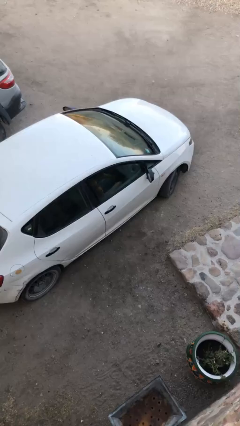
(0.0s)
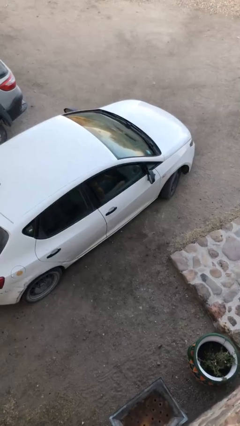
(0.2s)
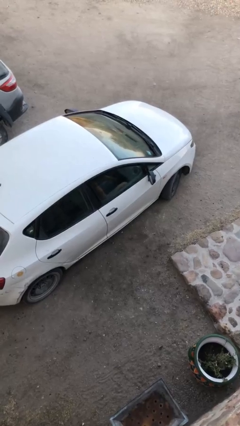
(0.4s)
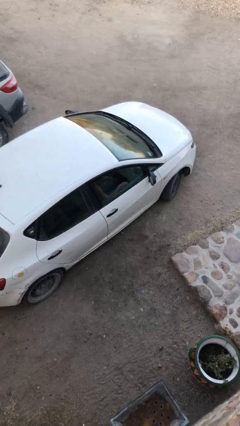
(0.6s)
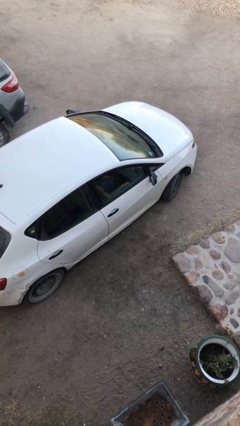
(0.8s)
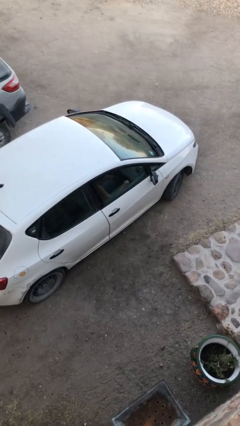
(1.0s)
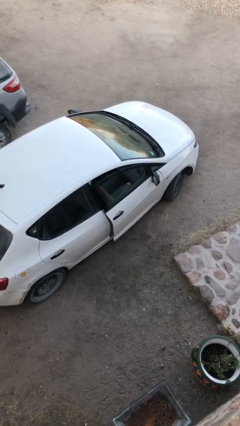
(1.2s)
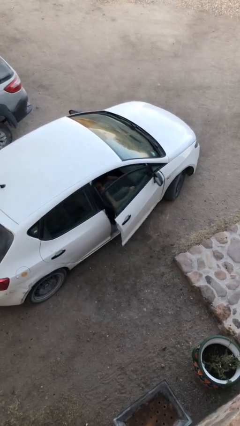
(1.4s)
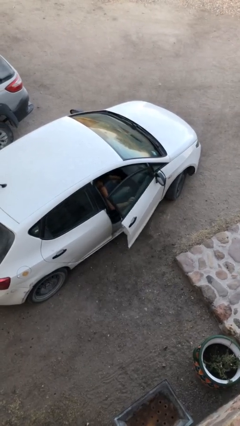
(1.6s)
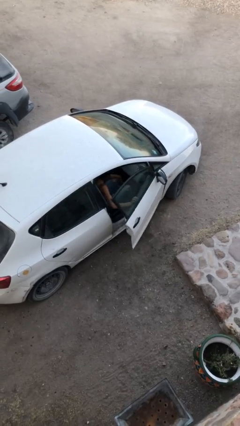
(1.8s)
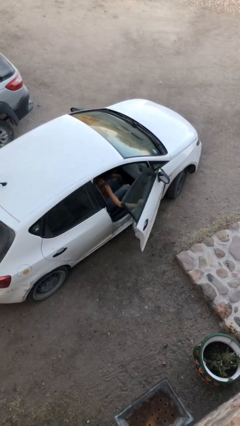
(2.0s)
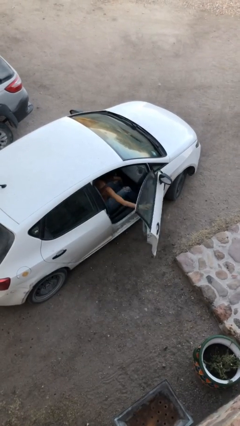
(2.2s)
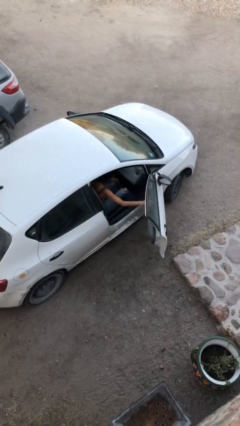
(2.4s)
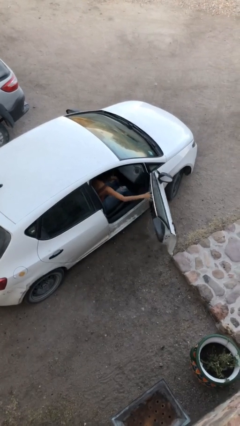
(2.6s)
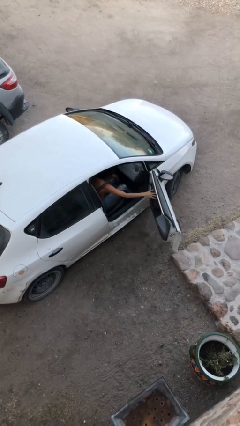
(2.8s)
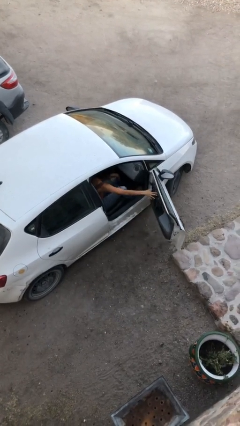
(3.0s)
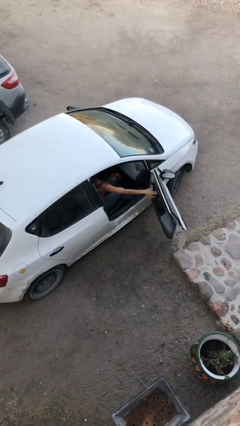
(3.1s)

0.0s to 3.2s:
person opens car door

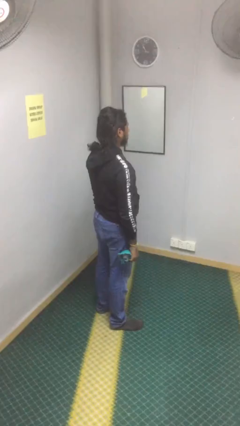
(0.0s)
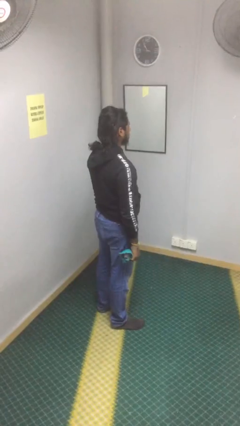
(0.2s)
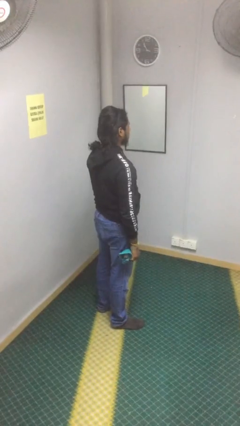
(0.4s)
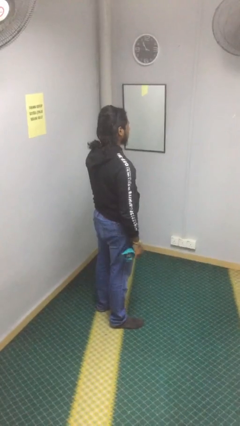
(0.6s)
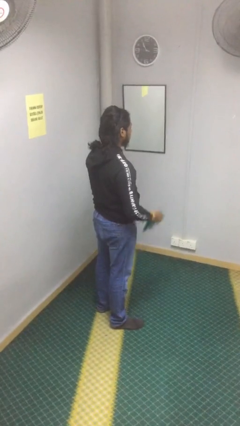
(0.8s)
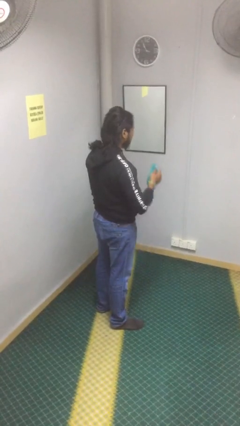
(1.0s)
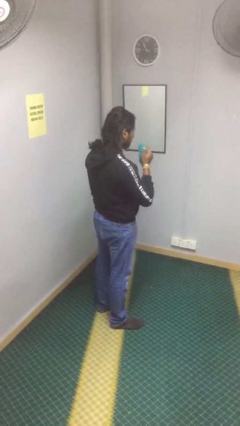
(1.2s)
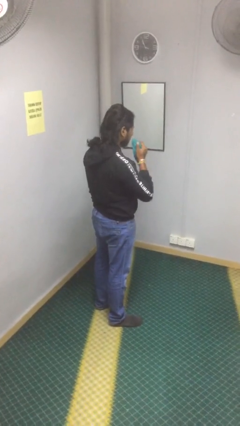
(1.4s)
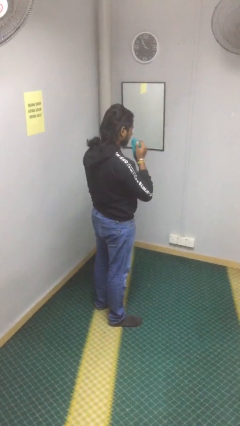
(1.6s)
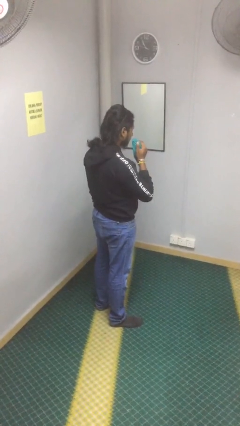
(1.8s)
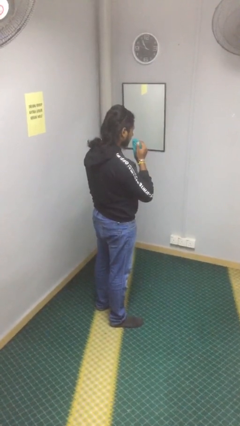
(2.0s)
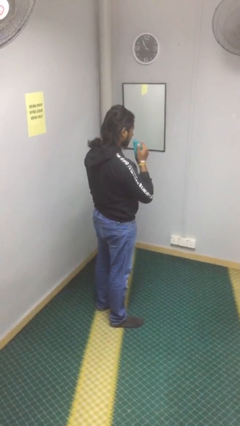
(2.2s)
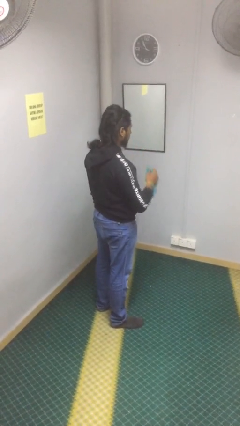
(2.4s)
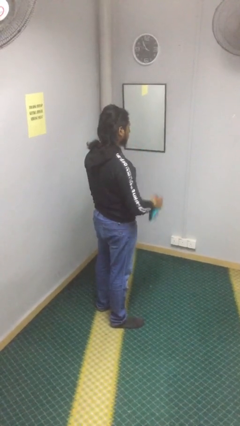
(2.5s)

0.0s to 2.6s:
person wipes mouth with napkin

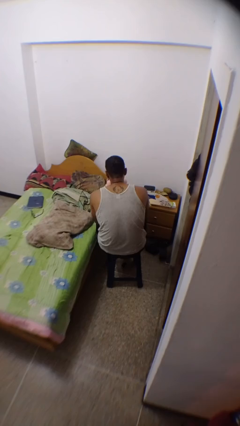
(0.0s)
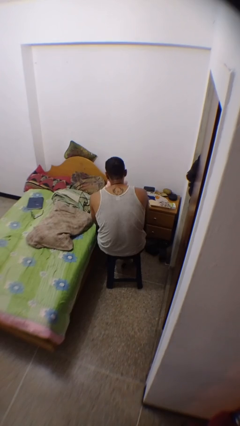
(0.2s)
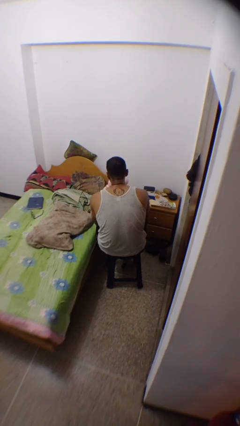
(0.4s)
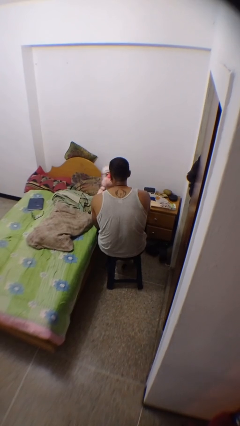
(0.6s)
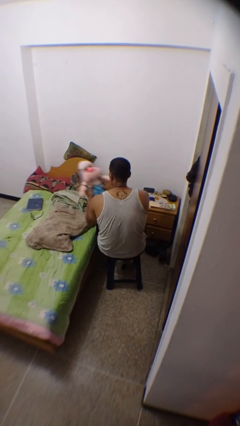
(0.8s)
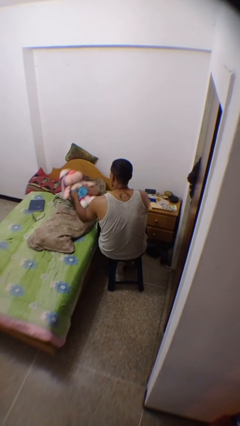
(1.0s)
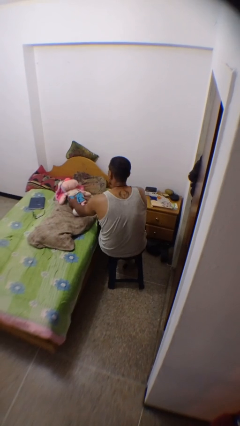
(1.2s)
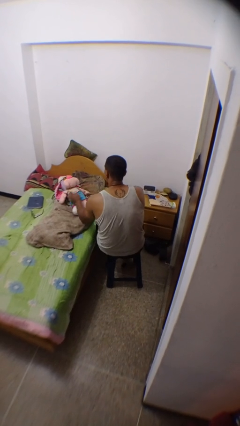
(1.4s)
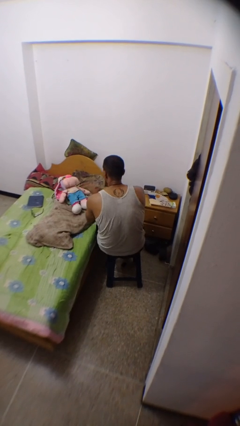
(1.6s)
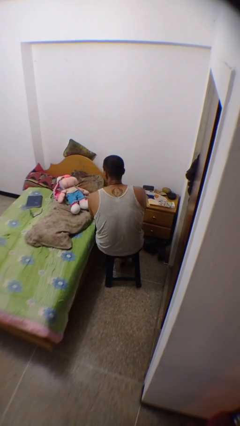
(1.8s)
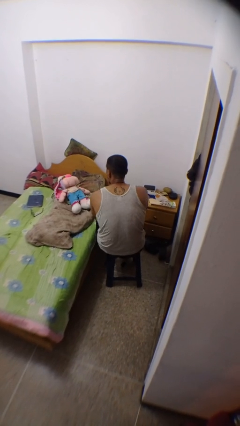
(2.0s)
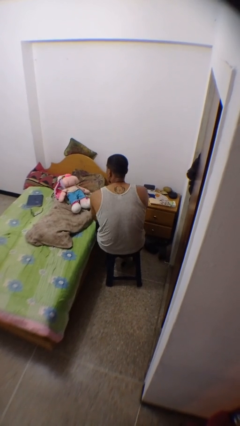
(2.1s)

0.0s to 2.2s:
person puts down object on bed

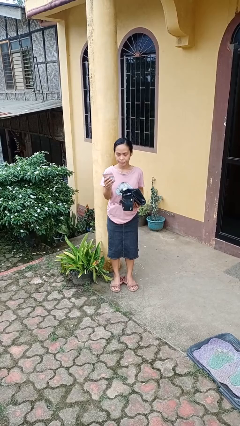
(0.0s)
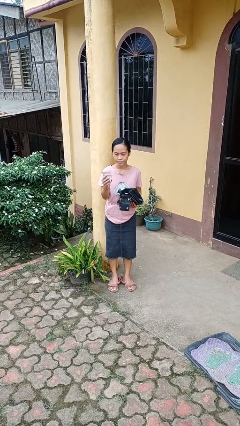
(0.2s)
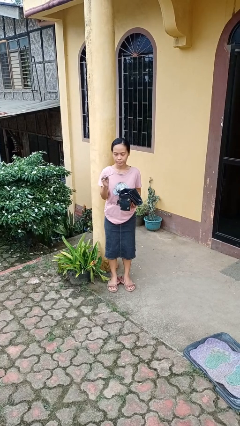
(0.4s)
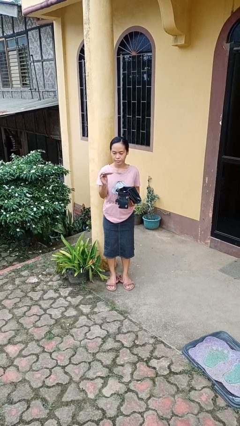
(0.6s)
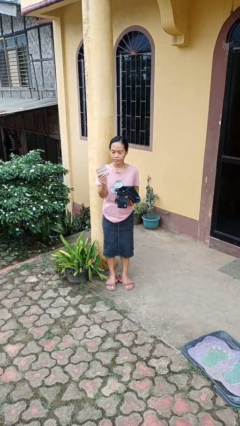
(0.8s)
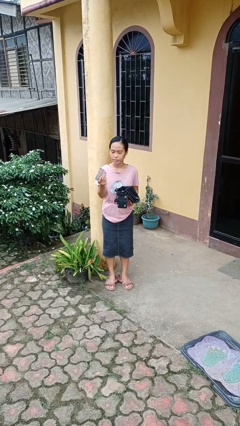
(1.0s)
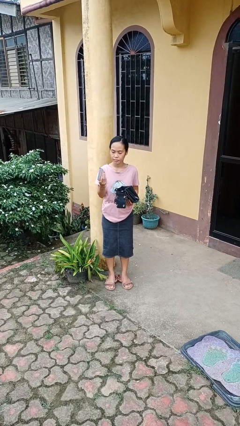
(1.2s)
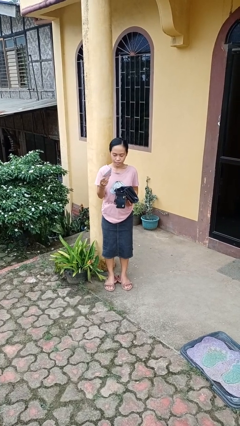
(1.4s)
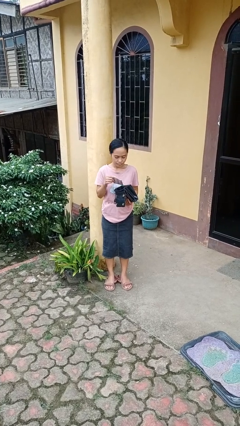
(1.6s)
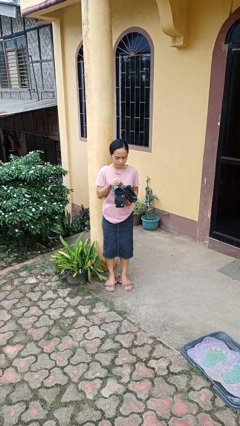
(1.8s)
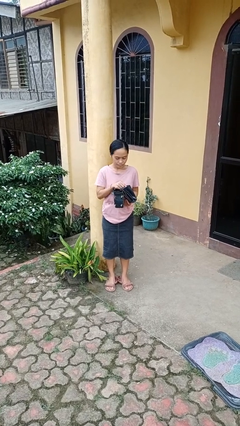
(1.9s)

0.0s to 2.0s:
person takes object from purse

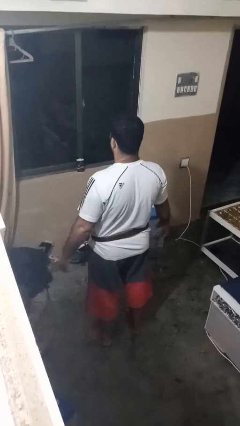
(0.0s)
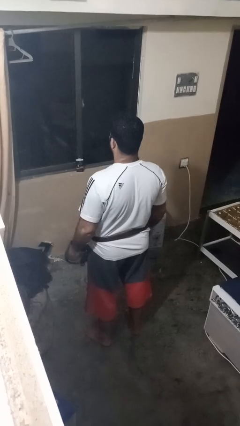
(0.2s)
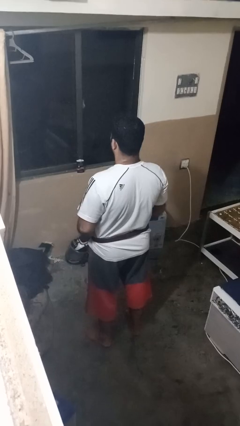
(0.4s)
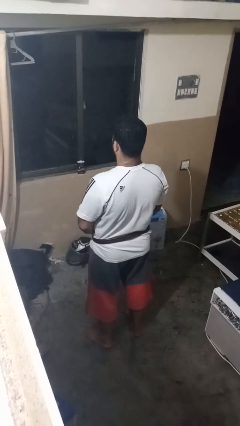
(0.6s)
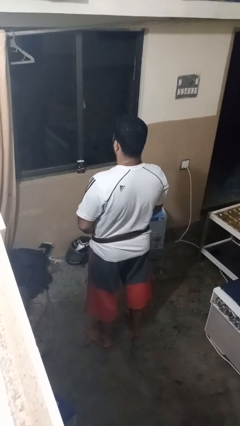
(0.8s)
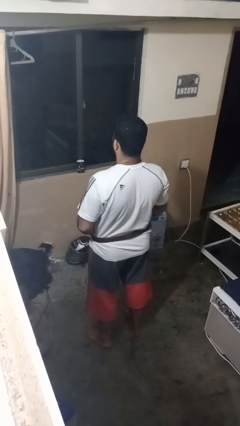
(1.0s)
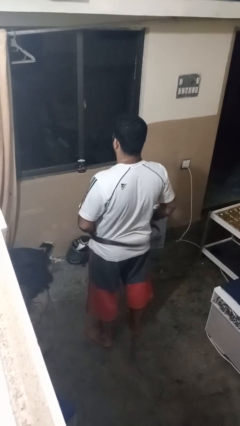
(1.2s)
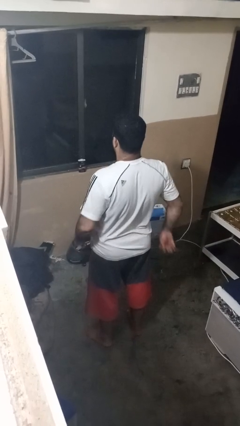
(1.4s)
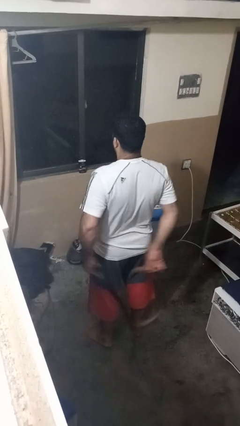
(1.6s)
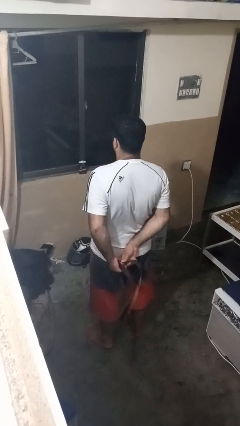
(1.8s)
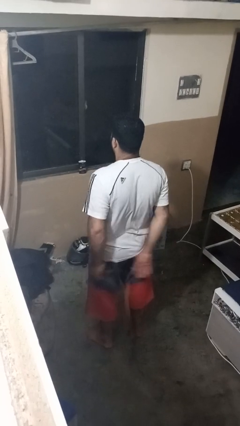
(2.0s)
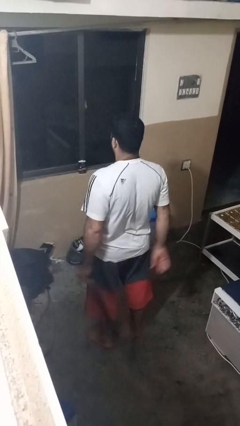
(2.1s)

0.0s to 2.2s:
person takes off belt

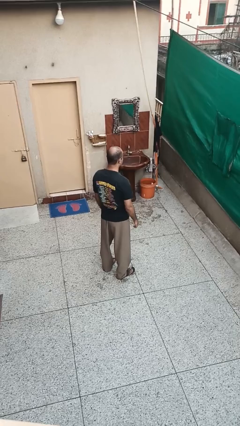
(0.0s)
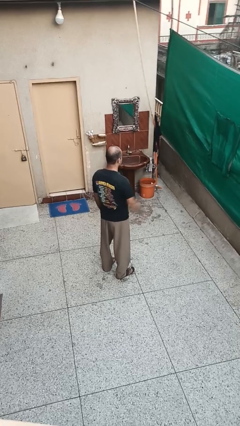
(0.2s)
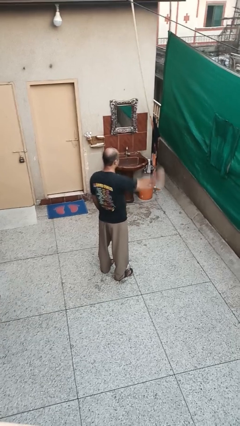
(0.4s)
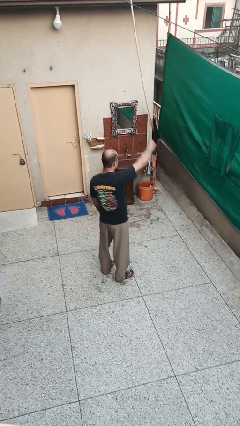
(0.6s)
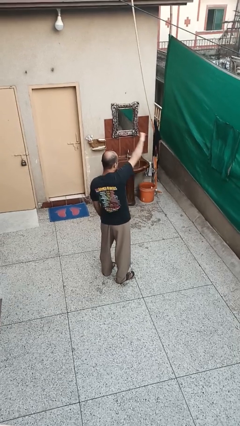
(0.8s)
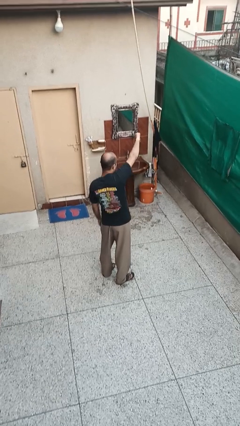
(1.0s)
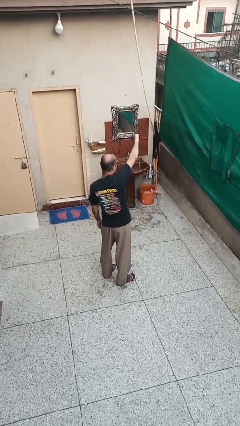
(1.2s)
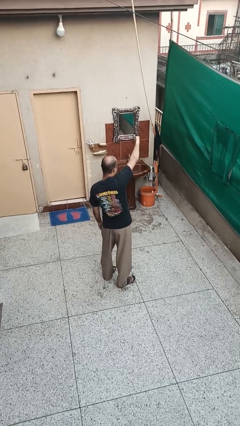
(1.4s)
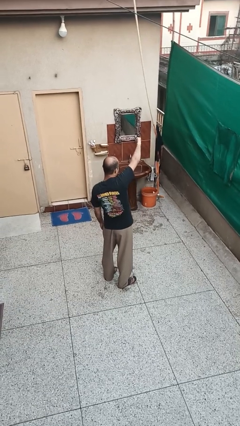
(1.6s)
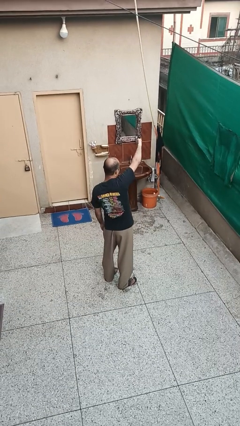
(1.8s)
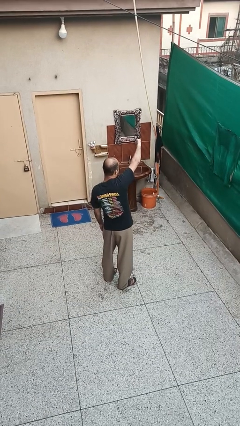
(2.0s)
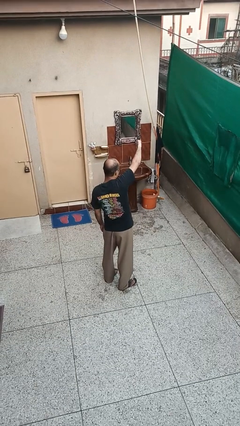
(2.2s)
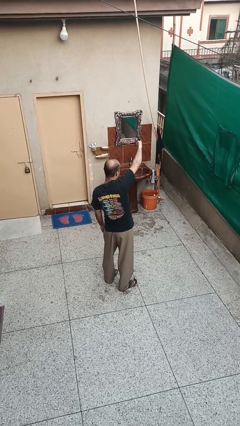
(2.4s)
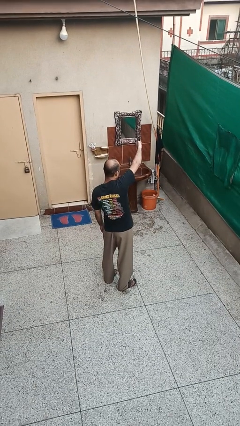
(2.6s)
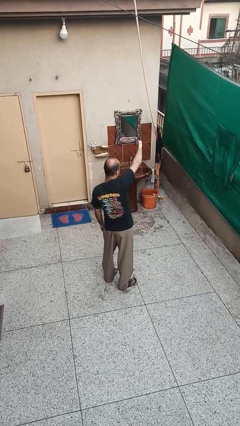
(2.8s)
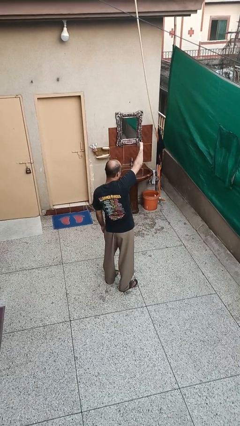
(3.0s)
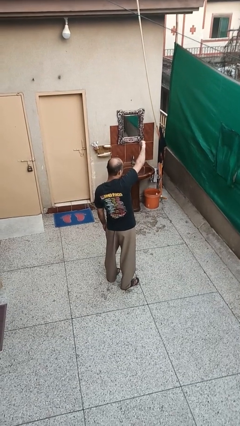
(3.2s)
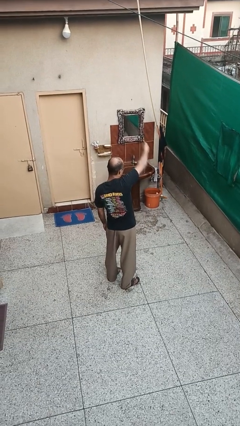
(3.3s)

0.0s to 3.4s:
person gestures thumbs down

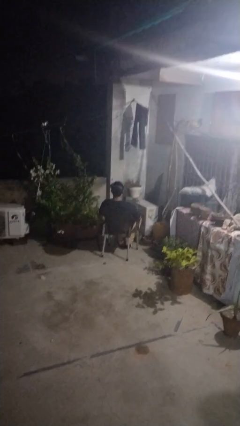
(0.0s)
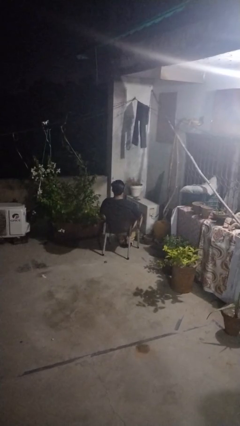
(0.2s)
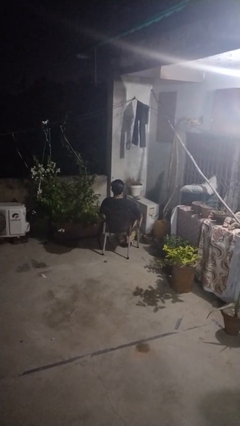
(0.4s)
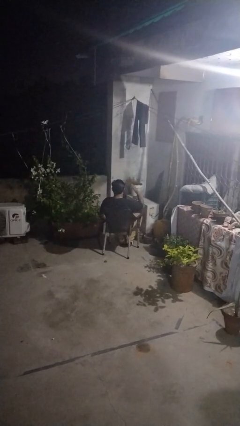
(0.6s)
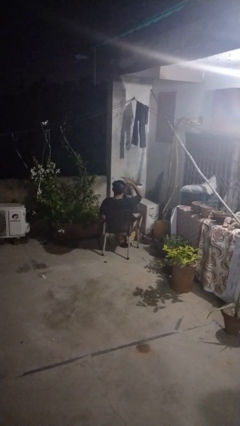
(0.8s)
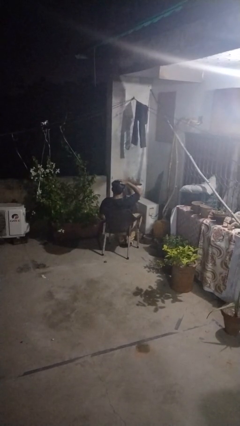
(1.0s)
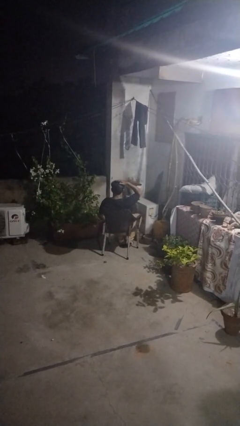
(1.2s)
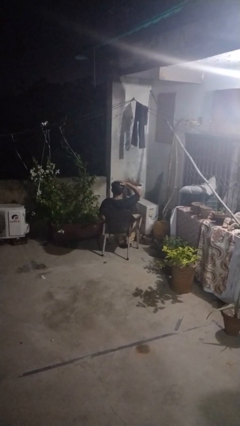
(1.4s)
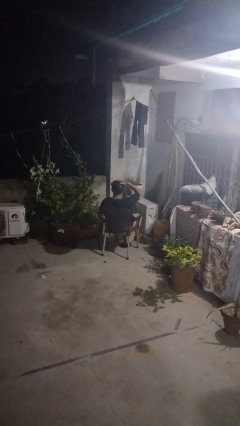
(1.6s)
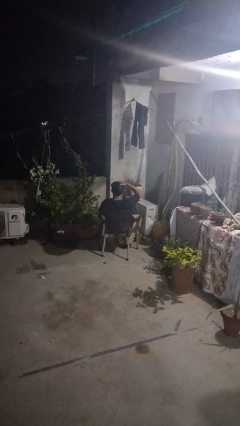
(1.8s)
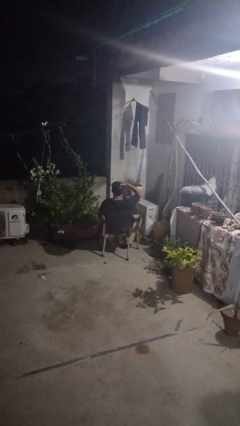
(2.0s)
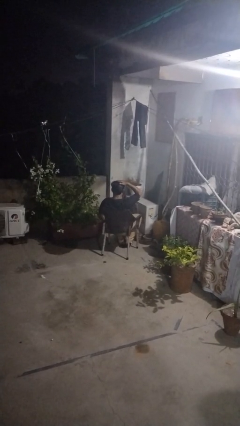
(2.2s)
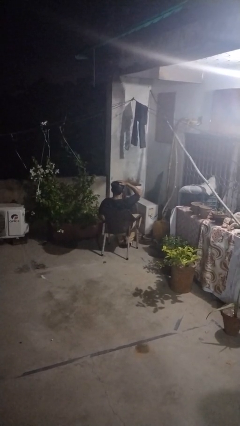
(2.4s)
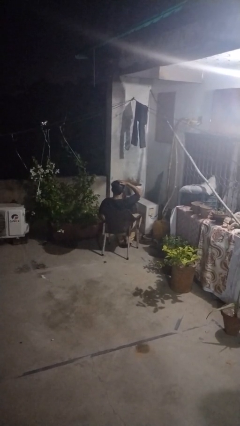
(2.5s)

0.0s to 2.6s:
person pats head
